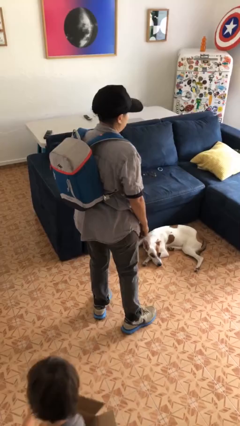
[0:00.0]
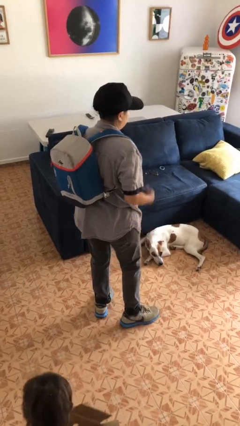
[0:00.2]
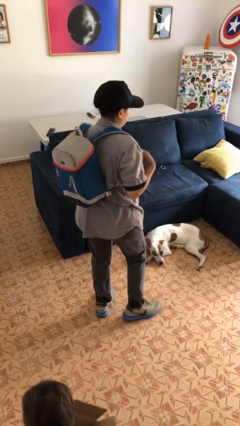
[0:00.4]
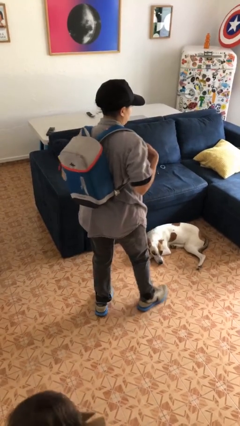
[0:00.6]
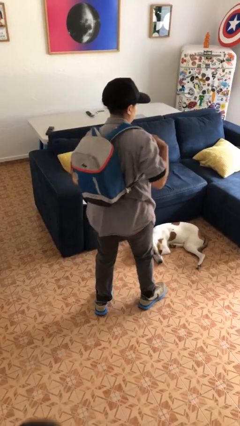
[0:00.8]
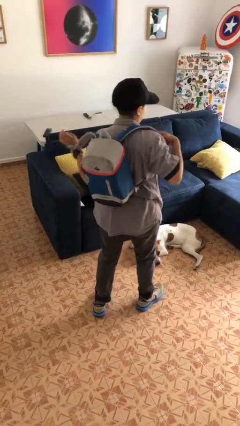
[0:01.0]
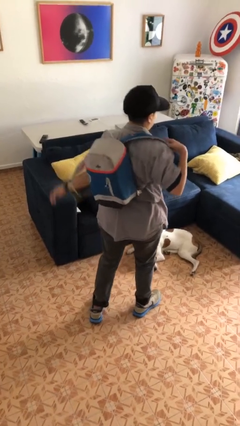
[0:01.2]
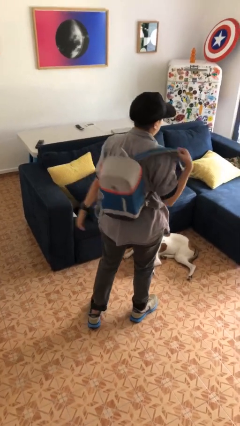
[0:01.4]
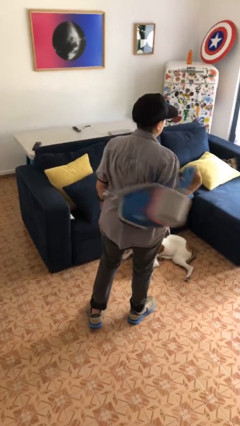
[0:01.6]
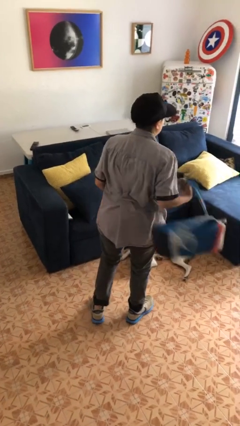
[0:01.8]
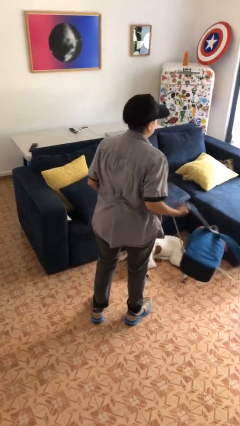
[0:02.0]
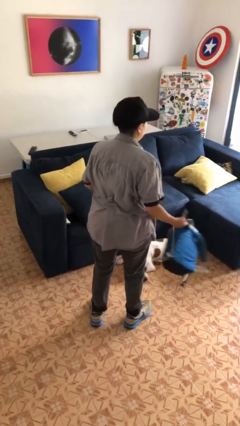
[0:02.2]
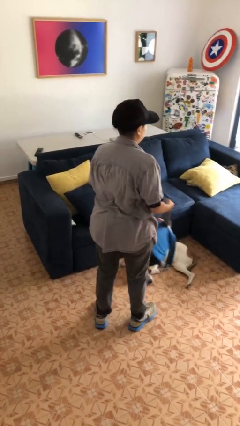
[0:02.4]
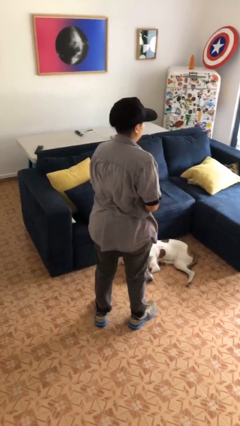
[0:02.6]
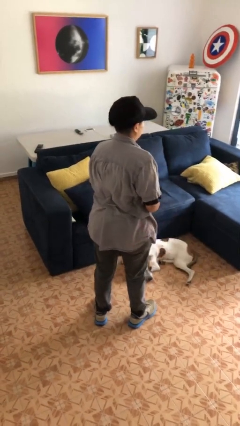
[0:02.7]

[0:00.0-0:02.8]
person takes off backpack

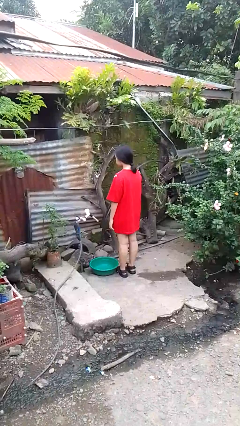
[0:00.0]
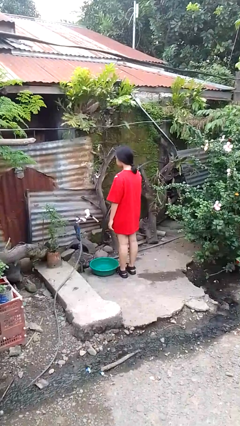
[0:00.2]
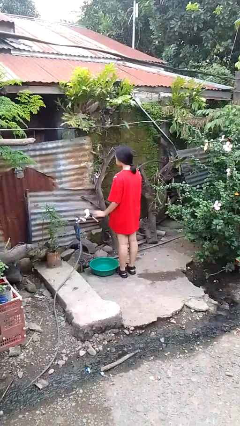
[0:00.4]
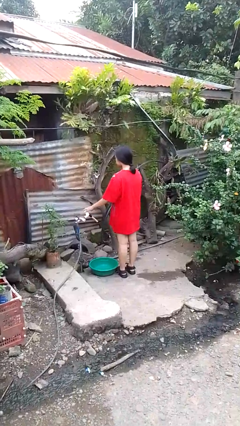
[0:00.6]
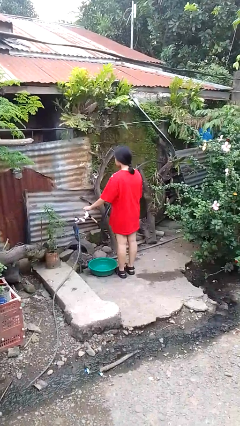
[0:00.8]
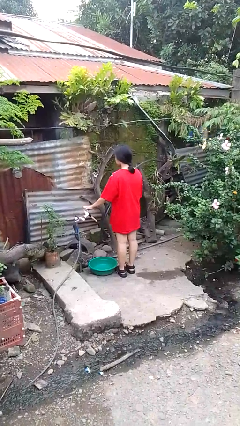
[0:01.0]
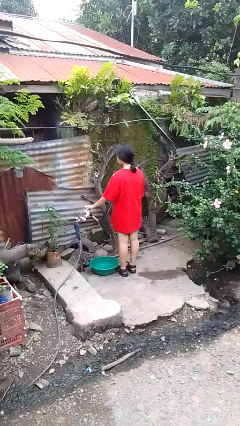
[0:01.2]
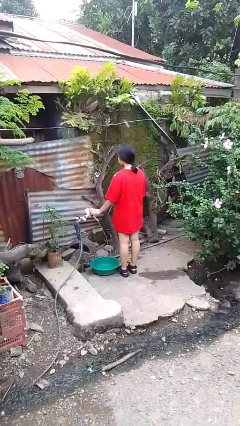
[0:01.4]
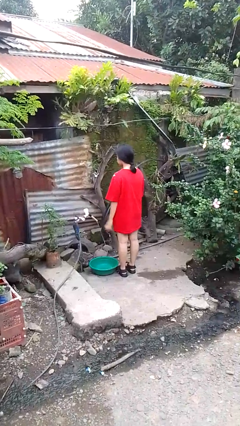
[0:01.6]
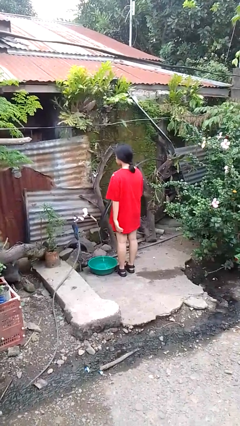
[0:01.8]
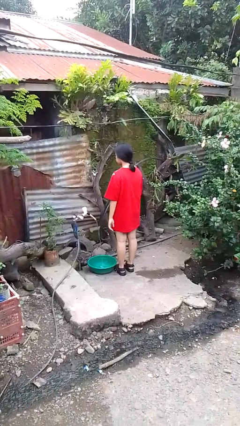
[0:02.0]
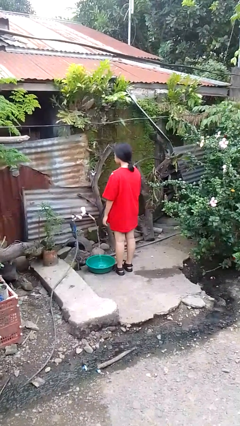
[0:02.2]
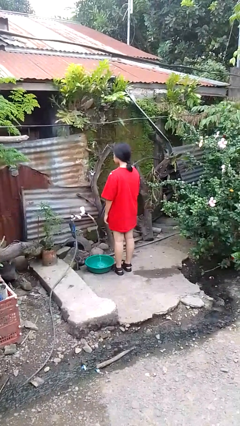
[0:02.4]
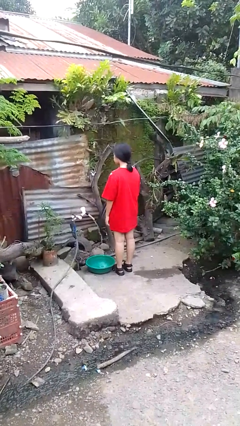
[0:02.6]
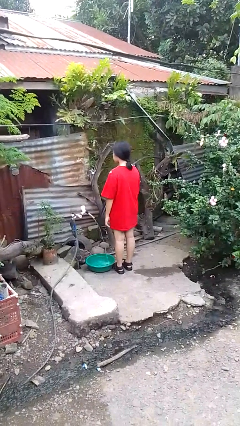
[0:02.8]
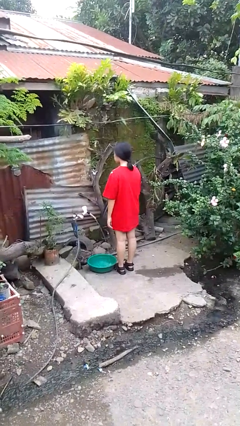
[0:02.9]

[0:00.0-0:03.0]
person turns on faucet

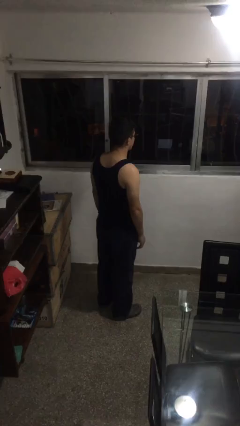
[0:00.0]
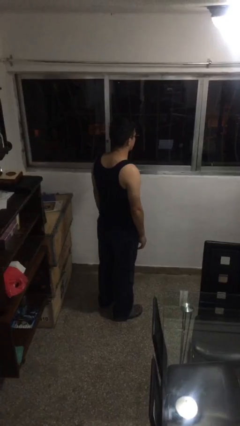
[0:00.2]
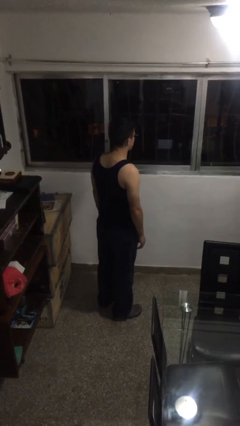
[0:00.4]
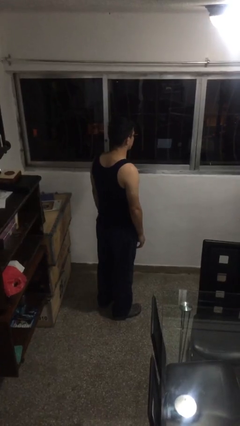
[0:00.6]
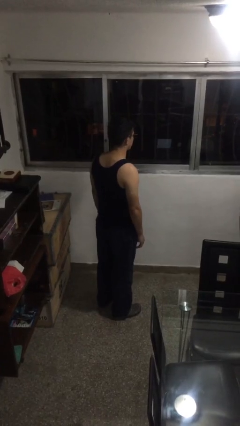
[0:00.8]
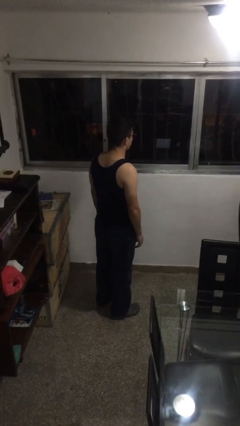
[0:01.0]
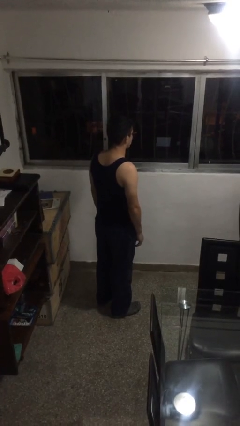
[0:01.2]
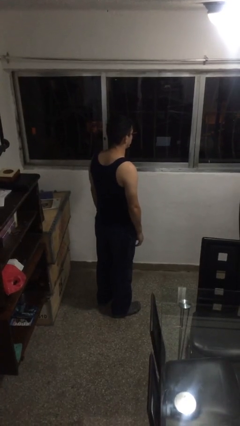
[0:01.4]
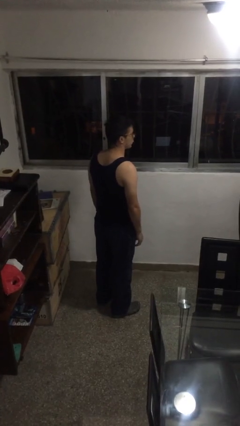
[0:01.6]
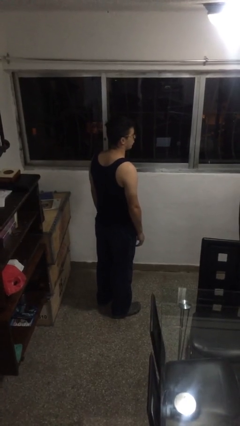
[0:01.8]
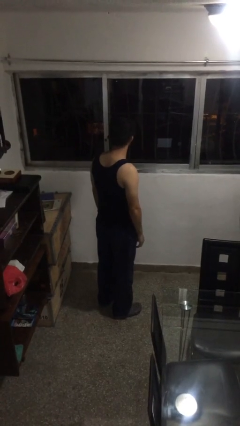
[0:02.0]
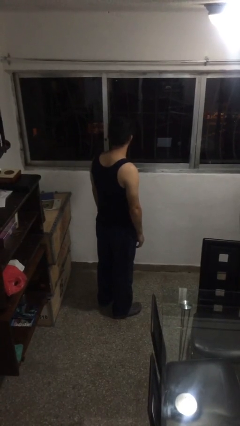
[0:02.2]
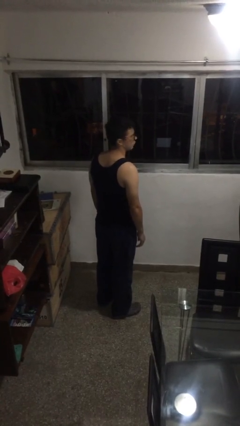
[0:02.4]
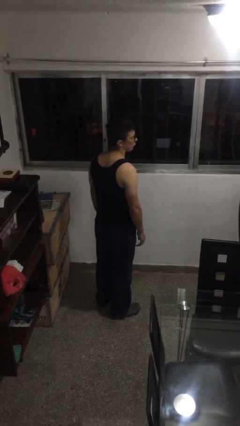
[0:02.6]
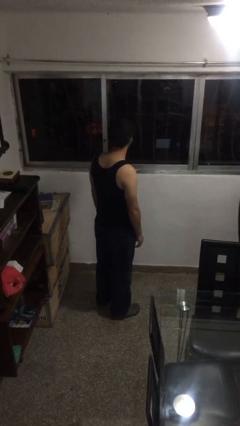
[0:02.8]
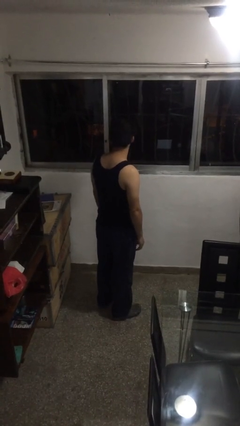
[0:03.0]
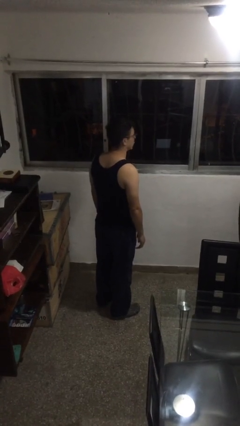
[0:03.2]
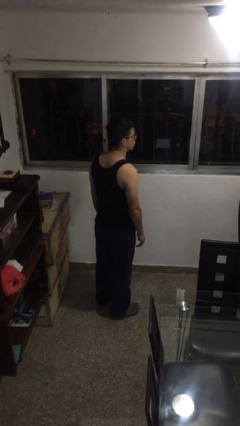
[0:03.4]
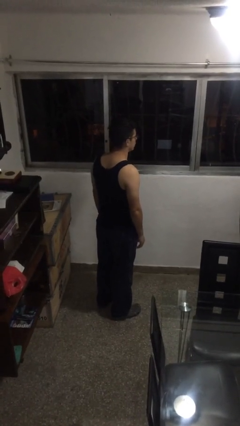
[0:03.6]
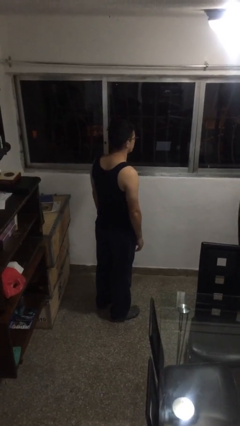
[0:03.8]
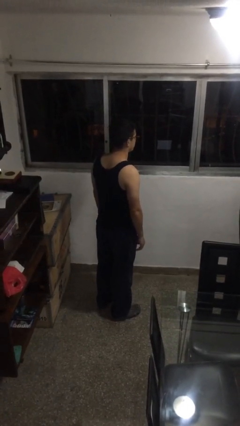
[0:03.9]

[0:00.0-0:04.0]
person shakes head

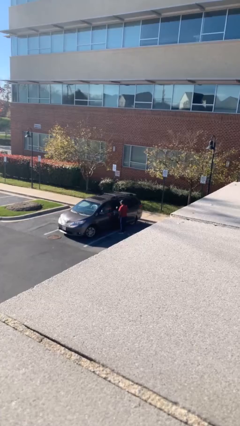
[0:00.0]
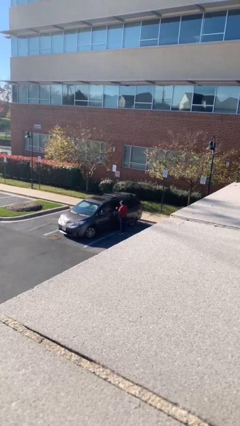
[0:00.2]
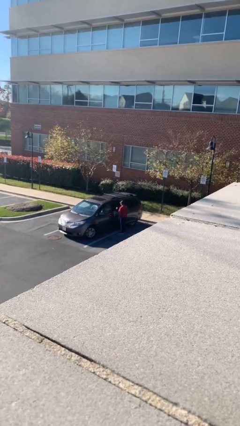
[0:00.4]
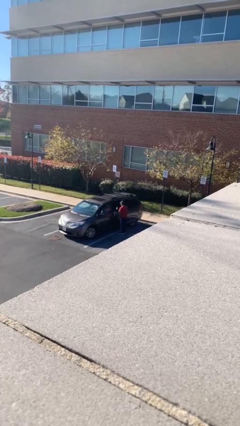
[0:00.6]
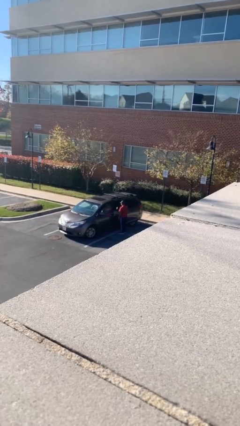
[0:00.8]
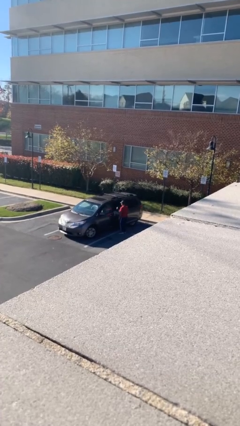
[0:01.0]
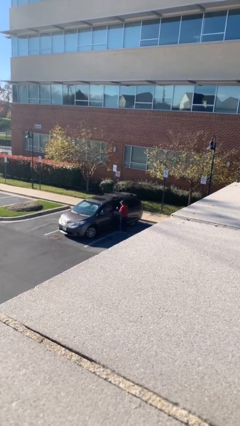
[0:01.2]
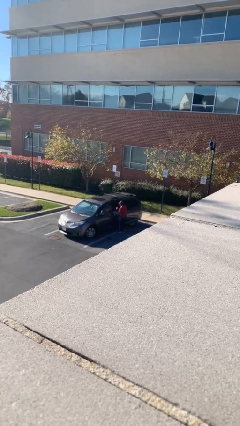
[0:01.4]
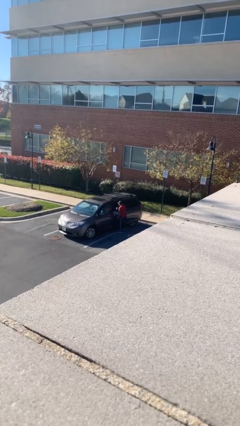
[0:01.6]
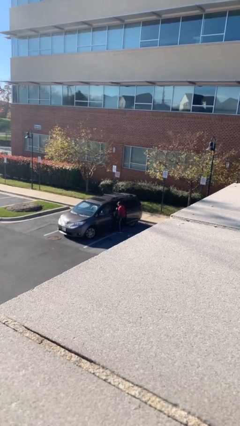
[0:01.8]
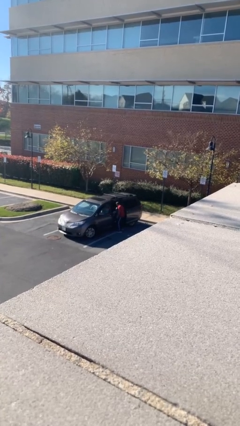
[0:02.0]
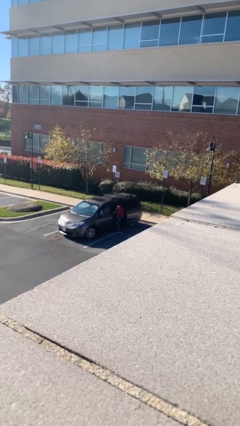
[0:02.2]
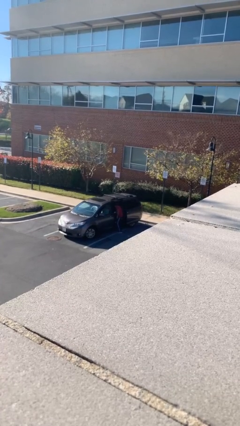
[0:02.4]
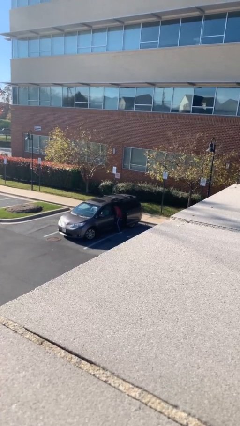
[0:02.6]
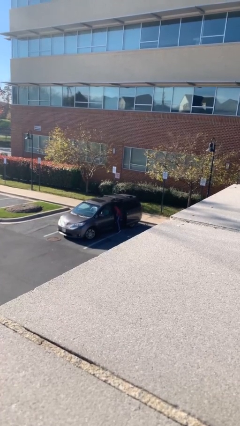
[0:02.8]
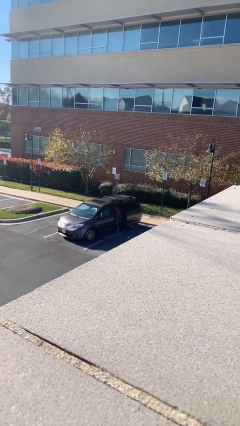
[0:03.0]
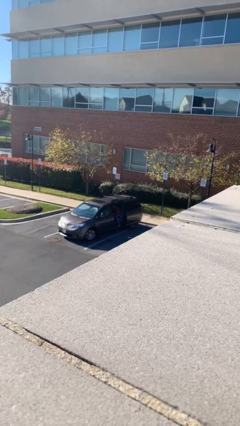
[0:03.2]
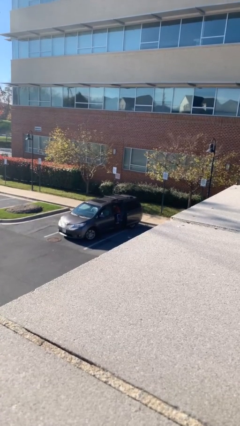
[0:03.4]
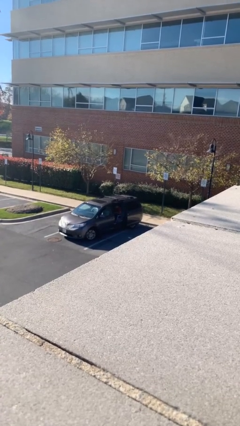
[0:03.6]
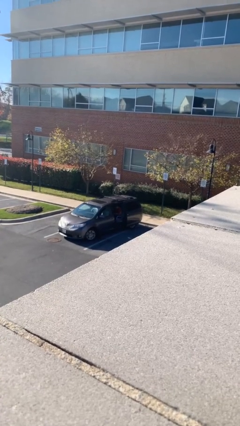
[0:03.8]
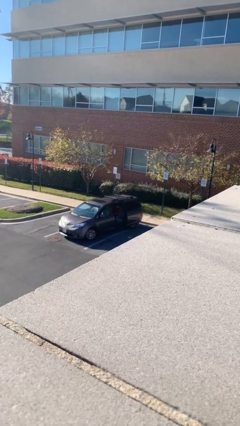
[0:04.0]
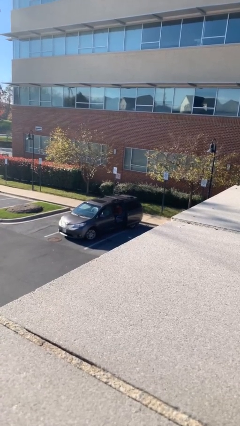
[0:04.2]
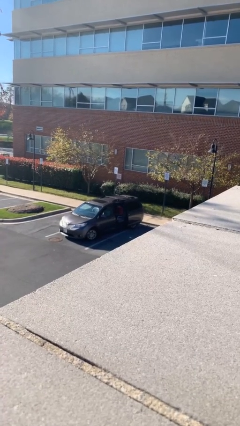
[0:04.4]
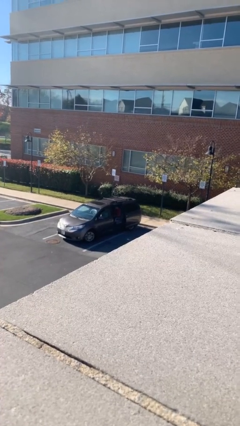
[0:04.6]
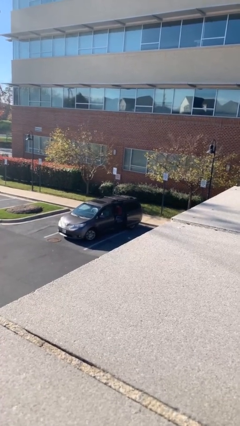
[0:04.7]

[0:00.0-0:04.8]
person enters car

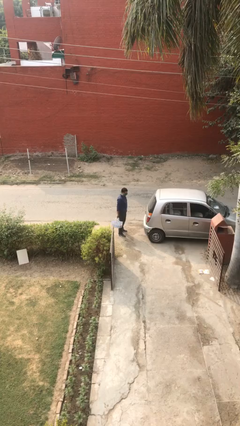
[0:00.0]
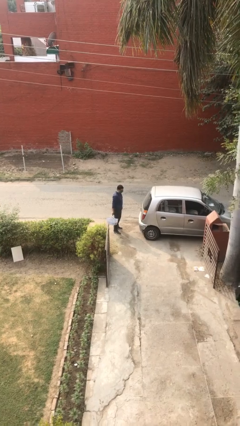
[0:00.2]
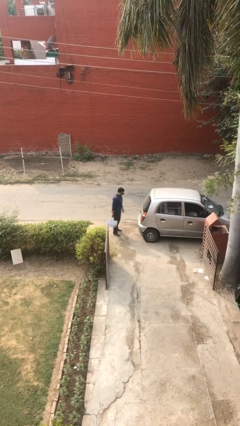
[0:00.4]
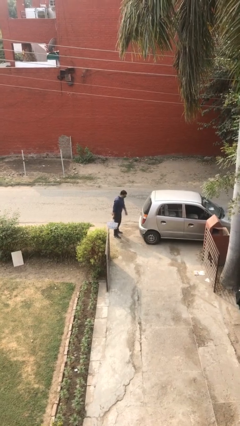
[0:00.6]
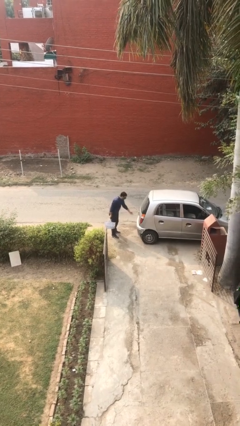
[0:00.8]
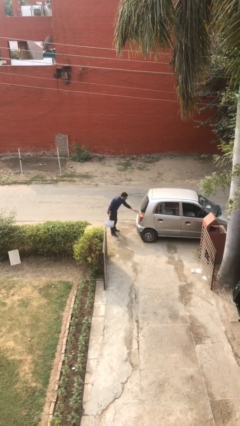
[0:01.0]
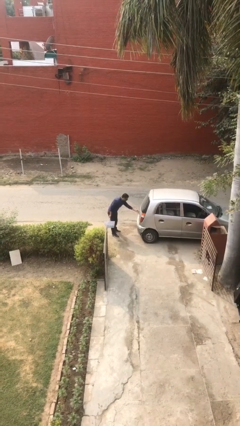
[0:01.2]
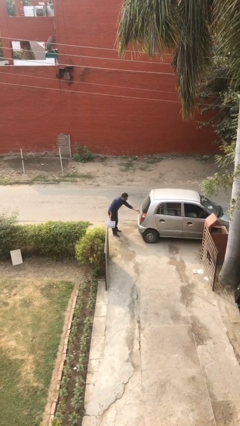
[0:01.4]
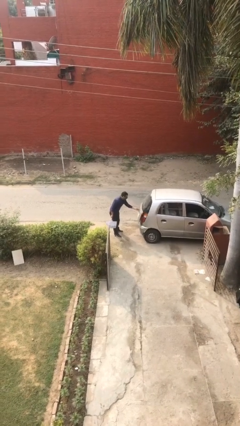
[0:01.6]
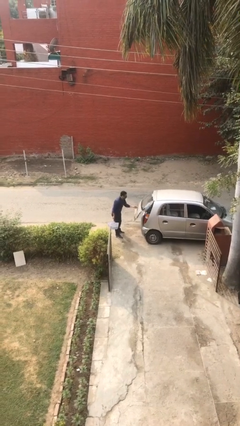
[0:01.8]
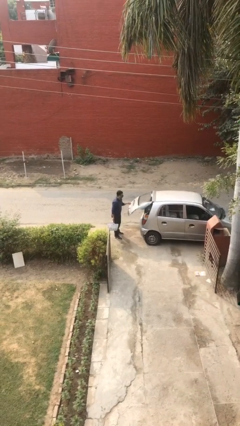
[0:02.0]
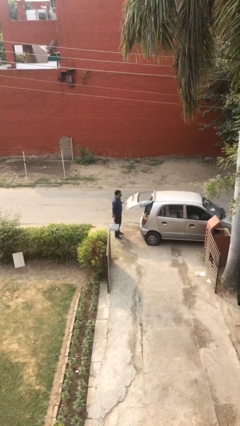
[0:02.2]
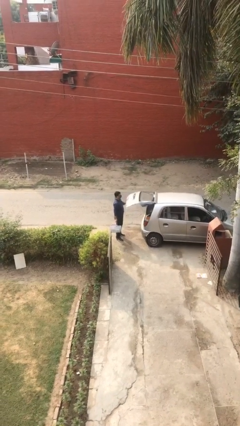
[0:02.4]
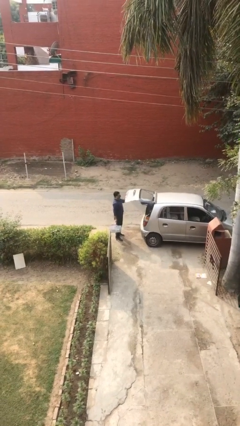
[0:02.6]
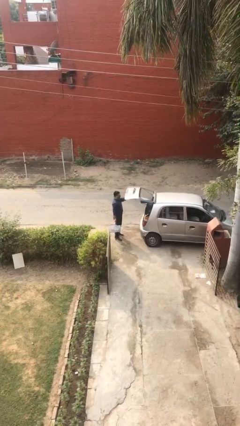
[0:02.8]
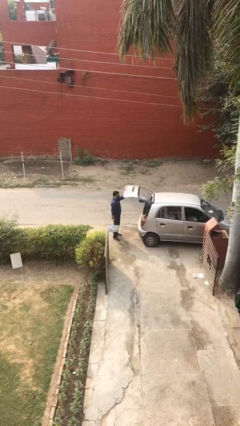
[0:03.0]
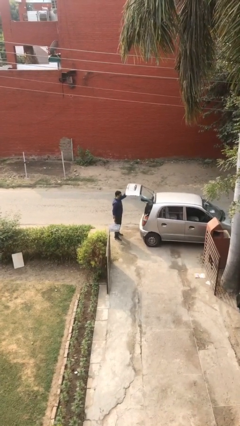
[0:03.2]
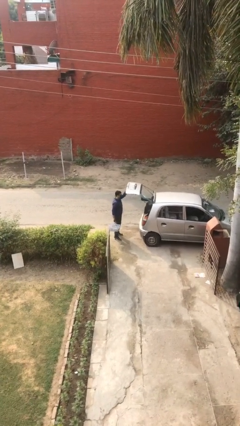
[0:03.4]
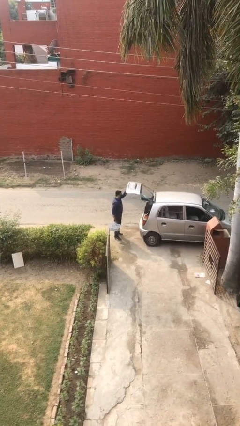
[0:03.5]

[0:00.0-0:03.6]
person opens car trunk
